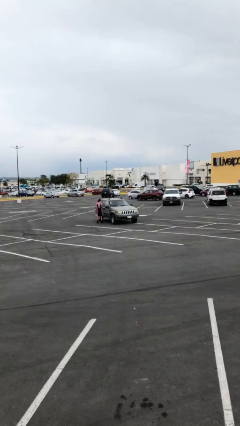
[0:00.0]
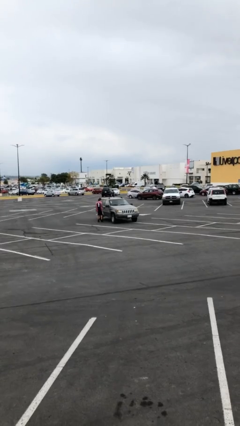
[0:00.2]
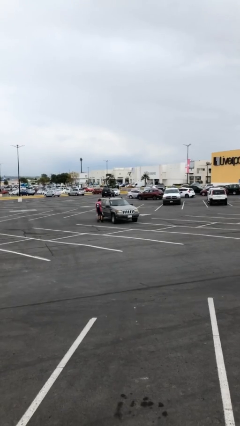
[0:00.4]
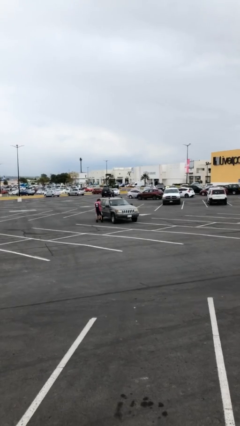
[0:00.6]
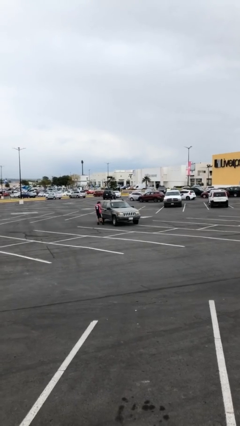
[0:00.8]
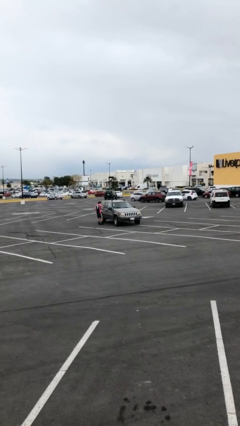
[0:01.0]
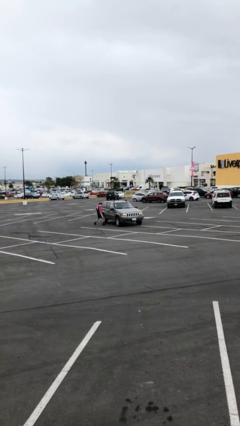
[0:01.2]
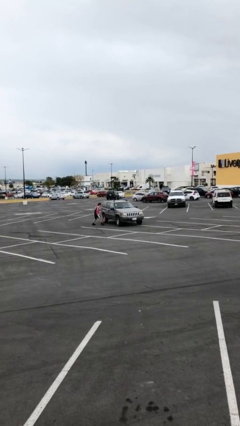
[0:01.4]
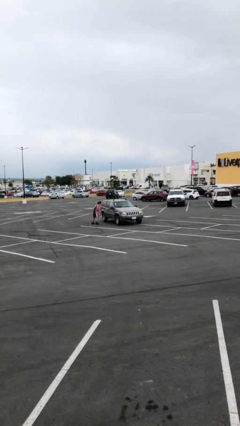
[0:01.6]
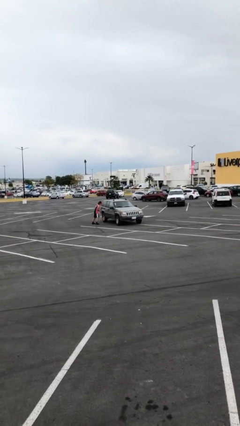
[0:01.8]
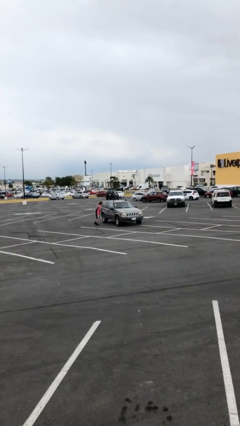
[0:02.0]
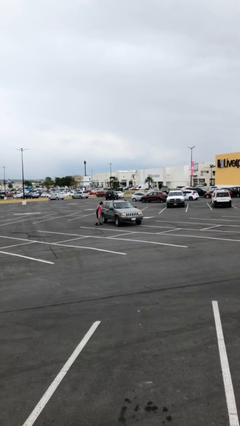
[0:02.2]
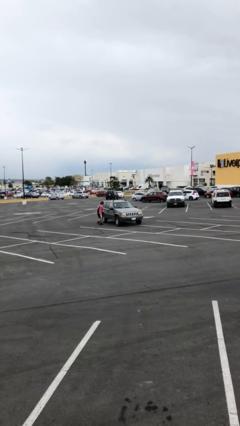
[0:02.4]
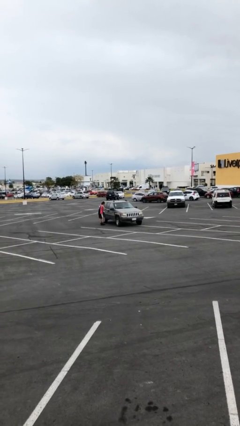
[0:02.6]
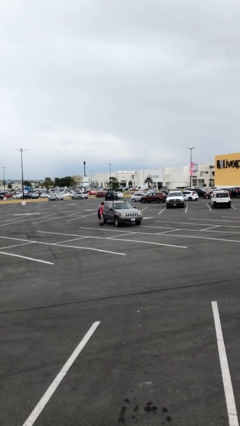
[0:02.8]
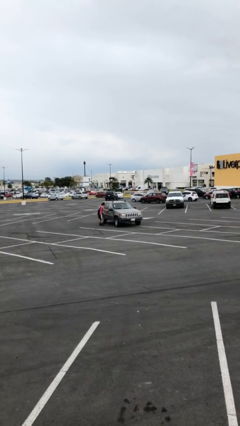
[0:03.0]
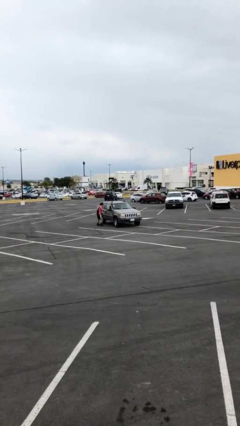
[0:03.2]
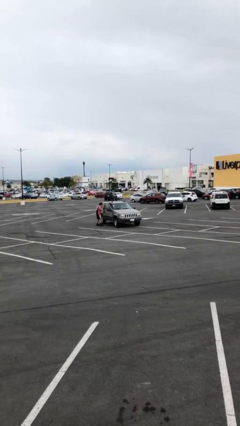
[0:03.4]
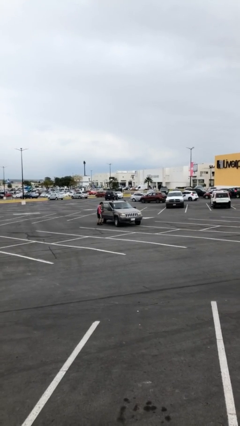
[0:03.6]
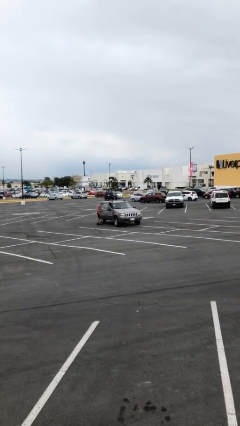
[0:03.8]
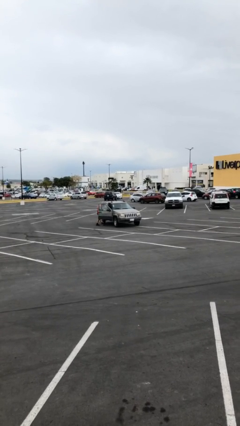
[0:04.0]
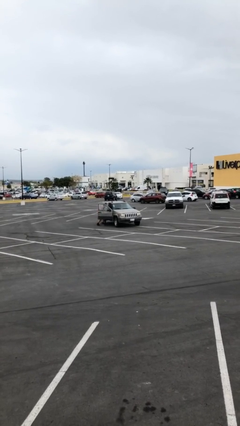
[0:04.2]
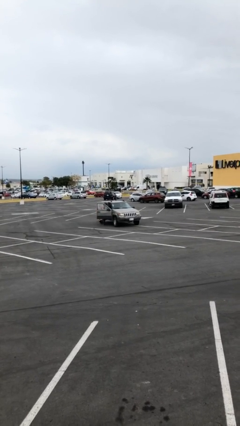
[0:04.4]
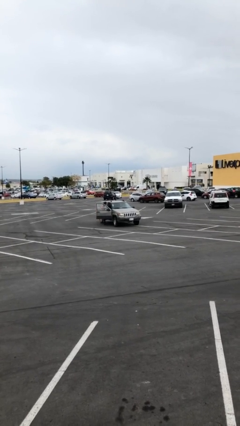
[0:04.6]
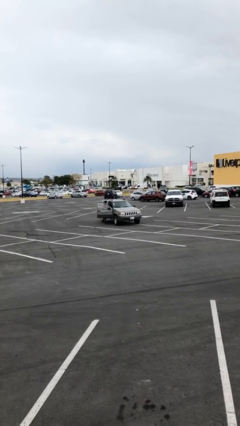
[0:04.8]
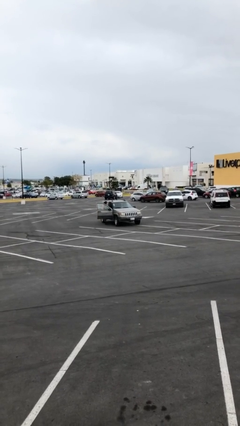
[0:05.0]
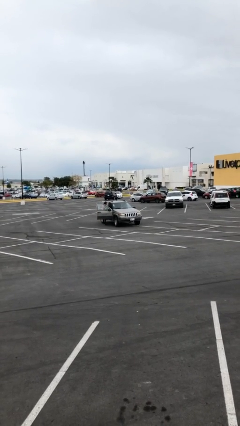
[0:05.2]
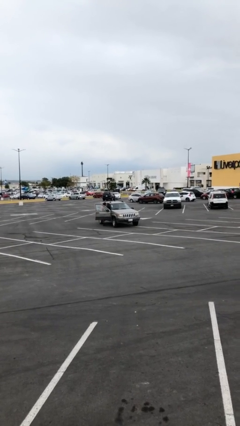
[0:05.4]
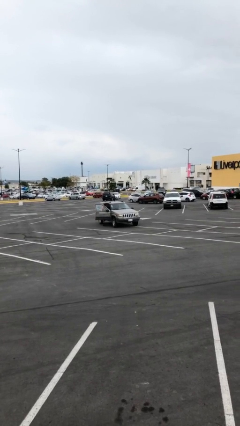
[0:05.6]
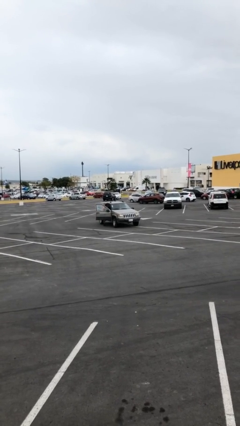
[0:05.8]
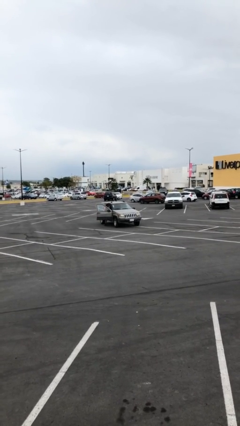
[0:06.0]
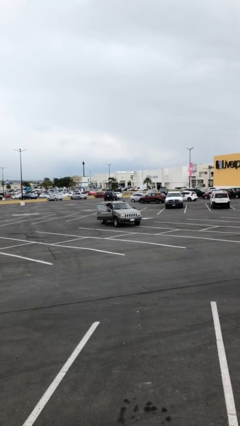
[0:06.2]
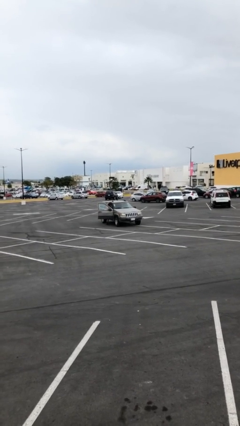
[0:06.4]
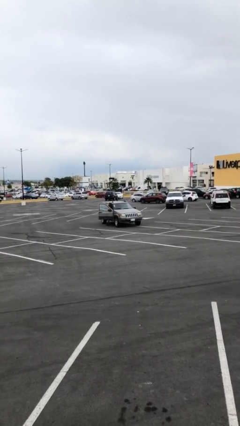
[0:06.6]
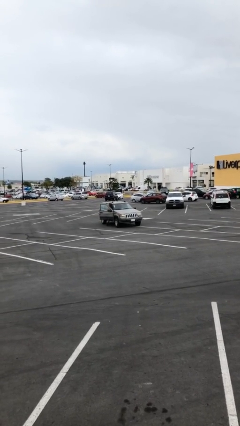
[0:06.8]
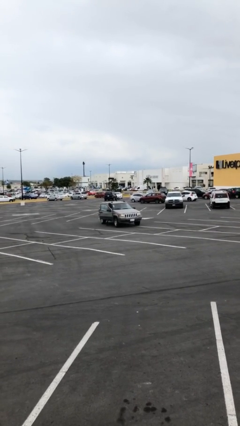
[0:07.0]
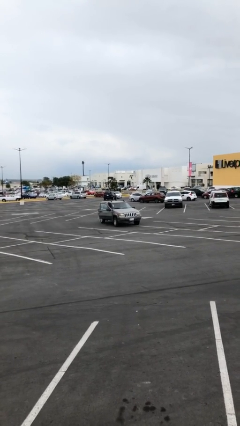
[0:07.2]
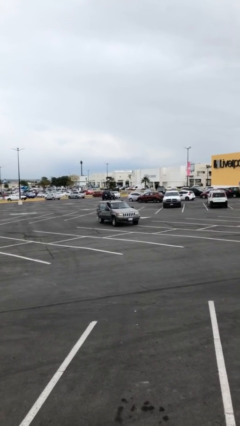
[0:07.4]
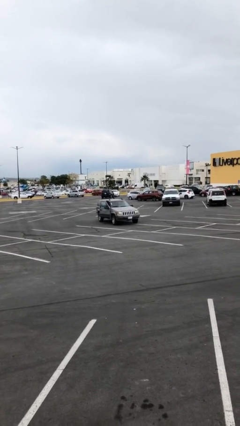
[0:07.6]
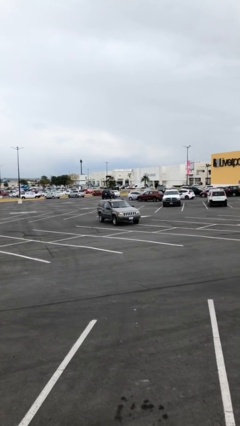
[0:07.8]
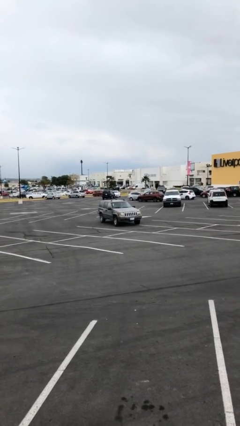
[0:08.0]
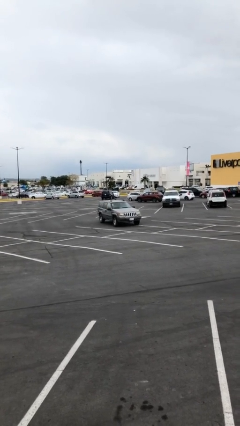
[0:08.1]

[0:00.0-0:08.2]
car picks up person

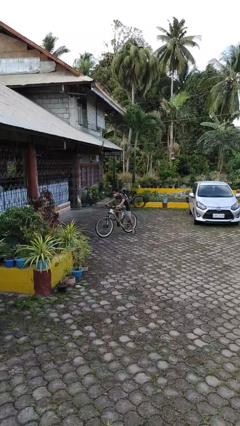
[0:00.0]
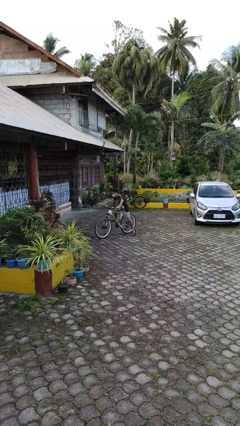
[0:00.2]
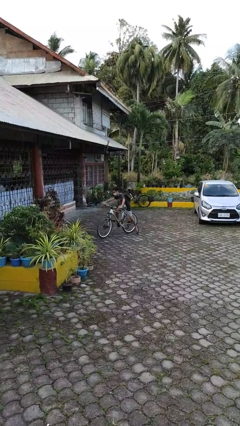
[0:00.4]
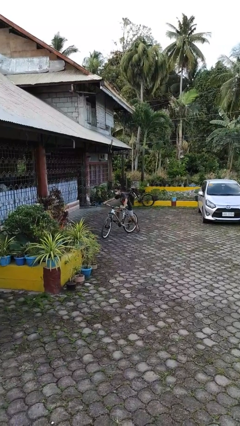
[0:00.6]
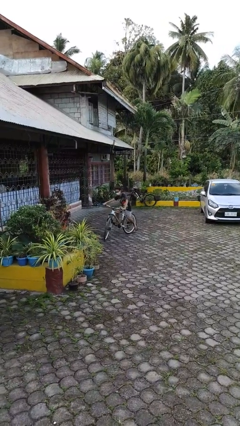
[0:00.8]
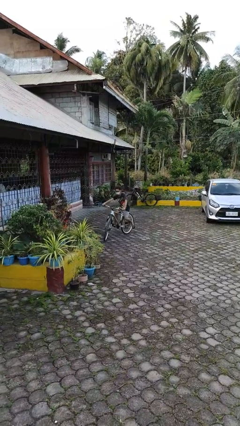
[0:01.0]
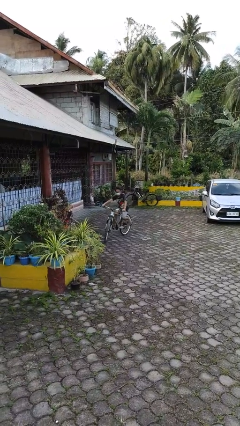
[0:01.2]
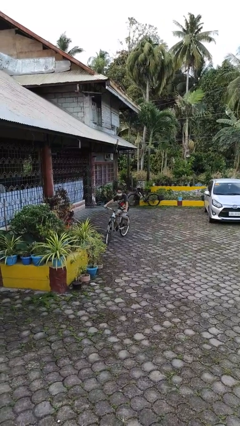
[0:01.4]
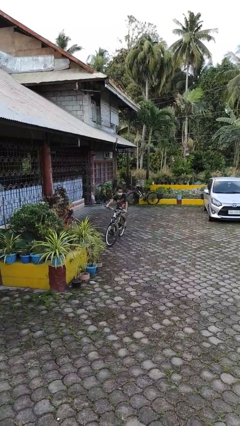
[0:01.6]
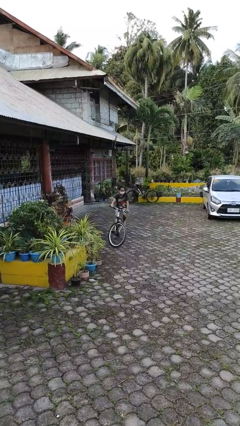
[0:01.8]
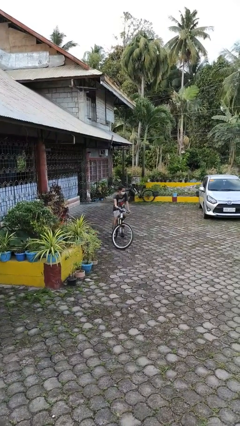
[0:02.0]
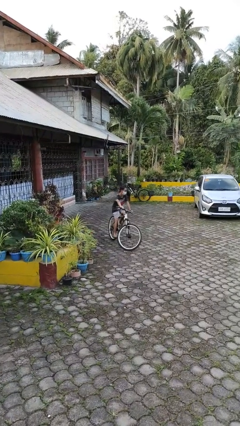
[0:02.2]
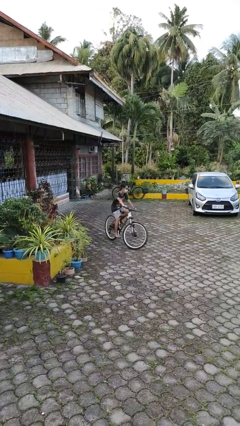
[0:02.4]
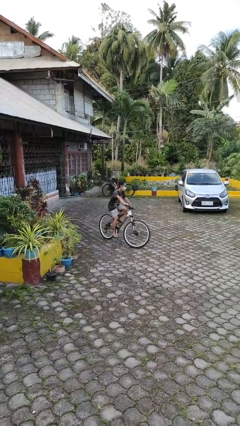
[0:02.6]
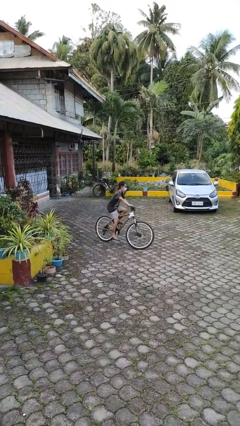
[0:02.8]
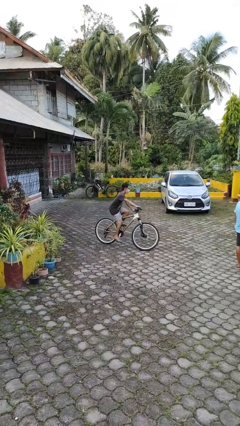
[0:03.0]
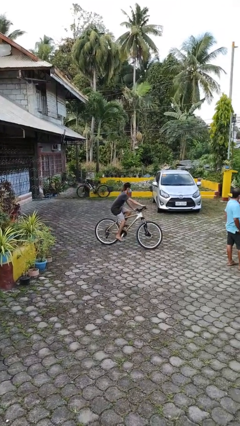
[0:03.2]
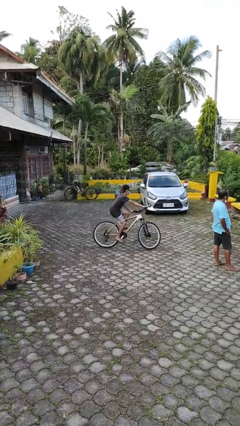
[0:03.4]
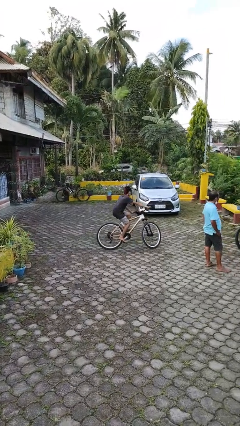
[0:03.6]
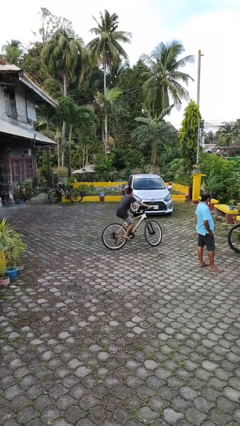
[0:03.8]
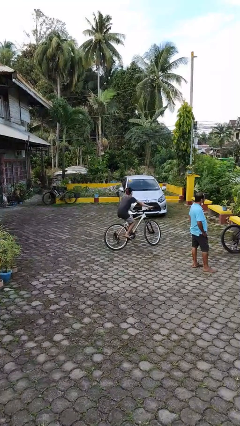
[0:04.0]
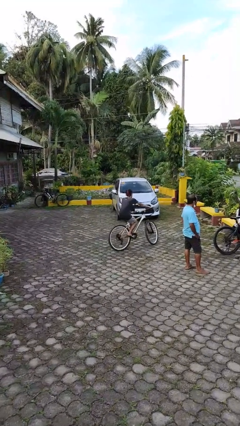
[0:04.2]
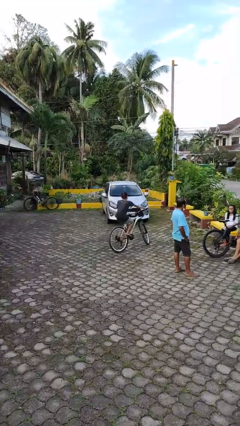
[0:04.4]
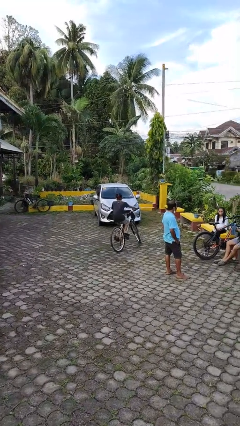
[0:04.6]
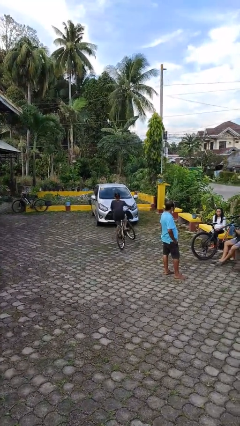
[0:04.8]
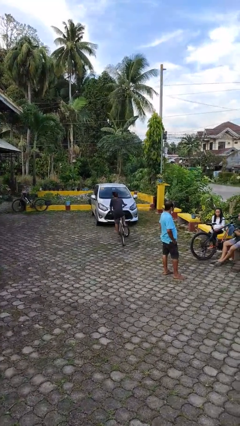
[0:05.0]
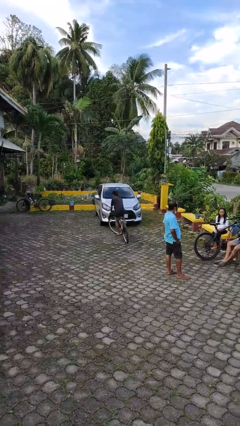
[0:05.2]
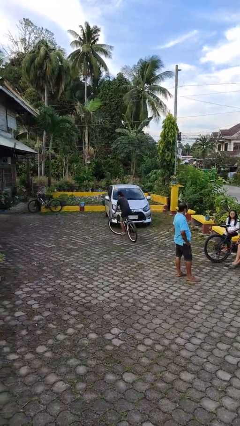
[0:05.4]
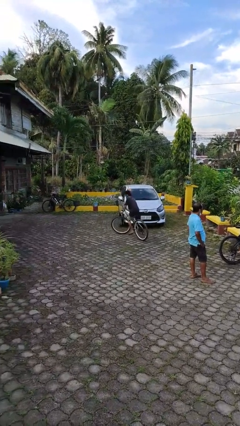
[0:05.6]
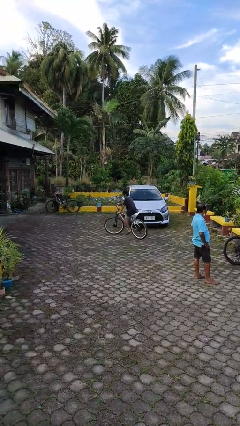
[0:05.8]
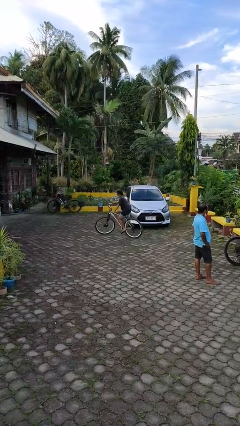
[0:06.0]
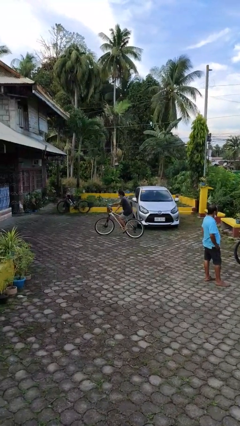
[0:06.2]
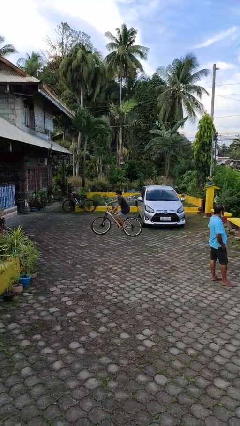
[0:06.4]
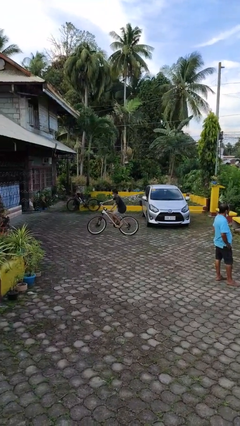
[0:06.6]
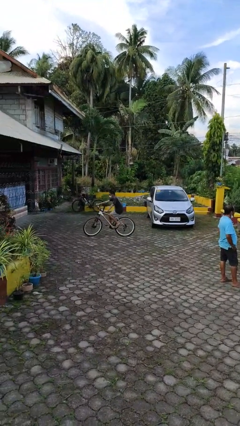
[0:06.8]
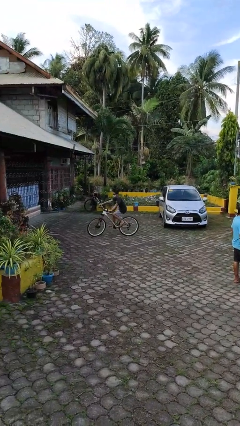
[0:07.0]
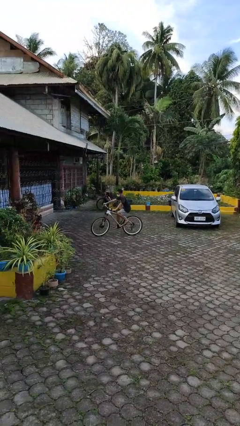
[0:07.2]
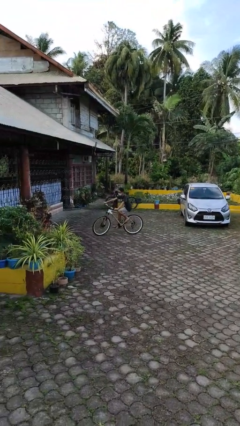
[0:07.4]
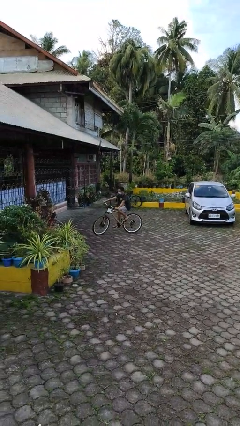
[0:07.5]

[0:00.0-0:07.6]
person rides bicycle

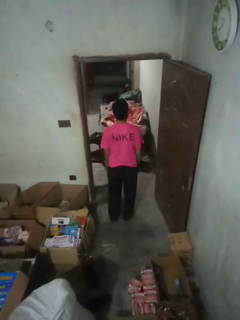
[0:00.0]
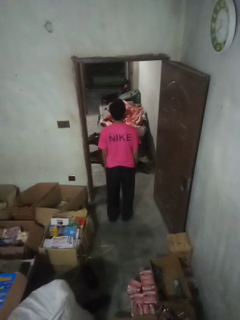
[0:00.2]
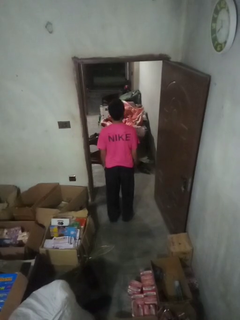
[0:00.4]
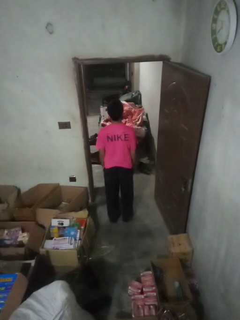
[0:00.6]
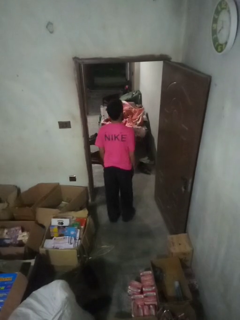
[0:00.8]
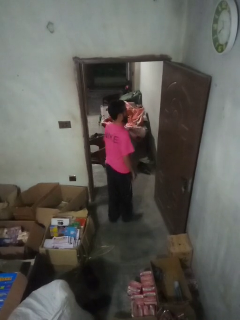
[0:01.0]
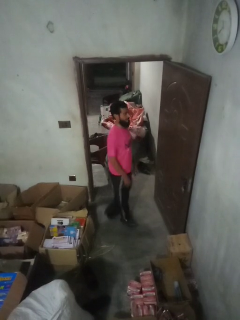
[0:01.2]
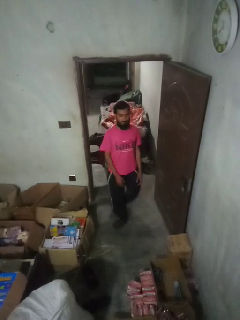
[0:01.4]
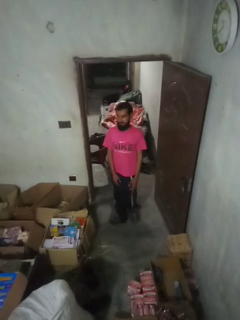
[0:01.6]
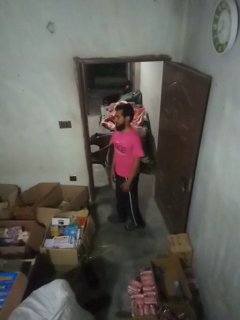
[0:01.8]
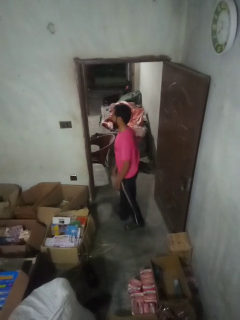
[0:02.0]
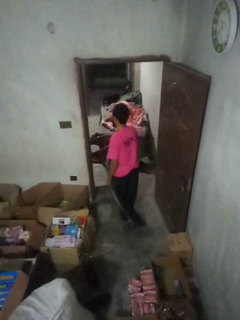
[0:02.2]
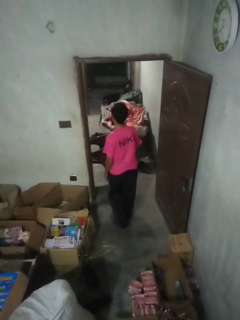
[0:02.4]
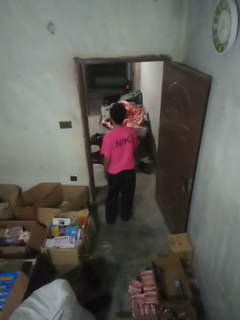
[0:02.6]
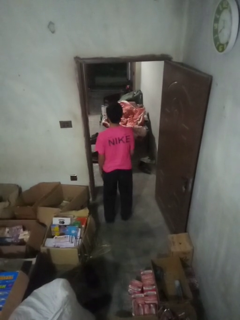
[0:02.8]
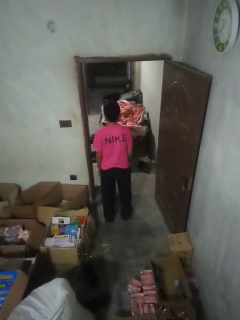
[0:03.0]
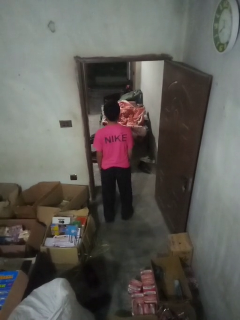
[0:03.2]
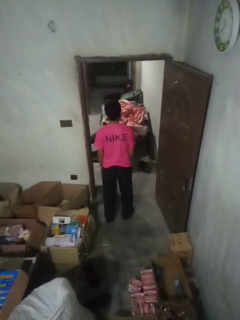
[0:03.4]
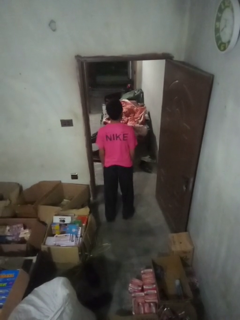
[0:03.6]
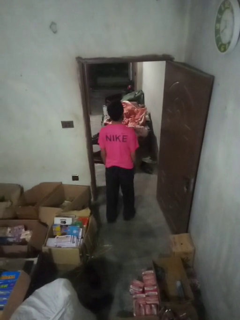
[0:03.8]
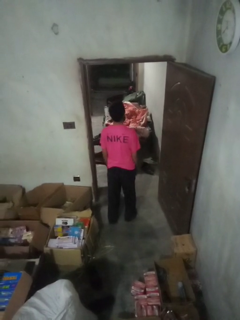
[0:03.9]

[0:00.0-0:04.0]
person twirls
